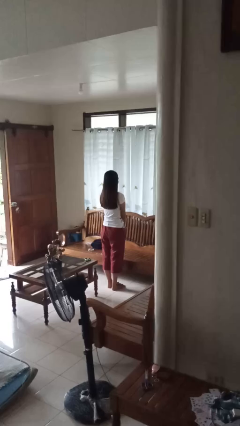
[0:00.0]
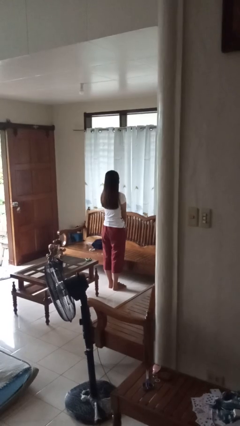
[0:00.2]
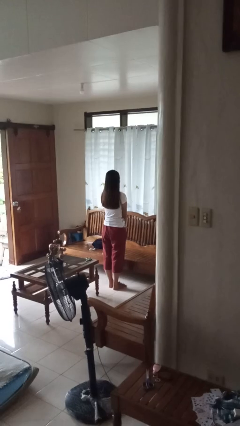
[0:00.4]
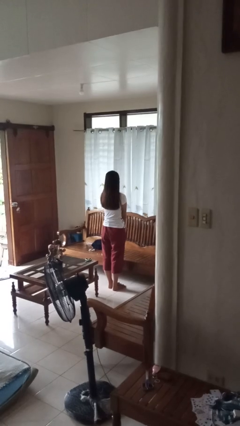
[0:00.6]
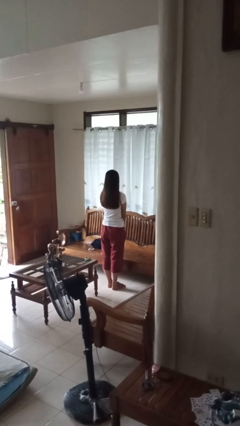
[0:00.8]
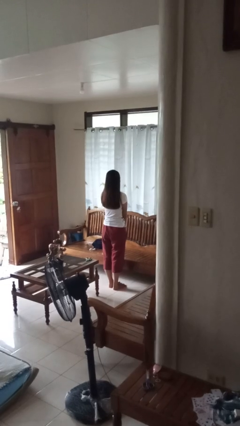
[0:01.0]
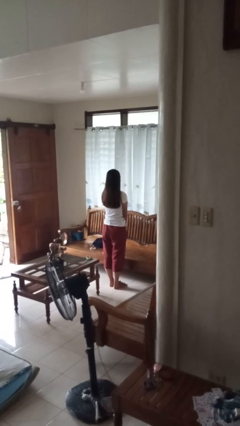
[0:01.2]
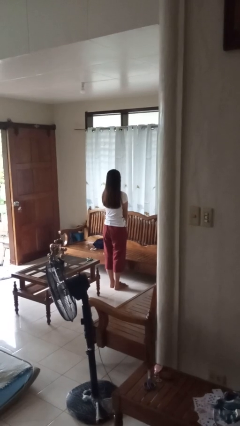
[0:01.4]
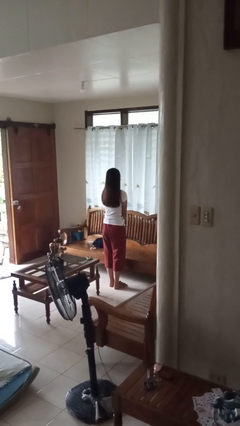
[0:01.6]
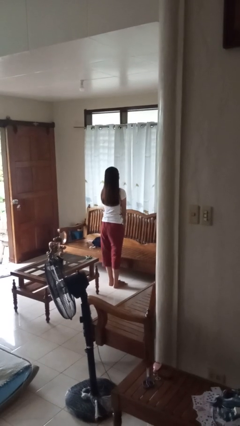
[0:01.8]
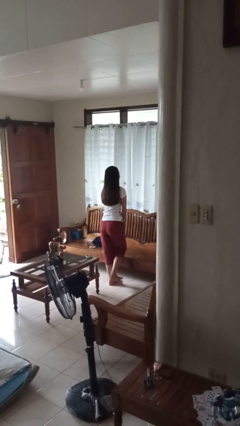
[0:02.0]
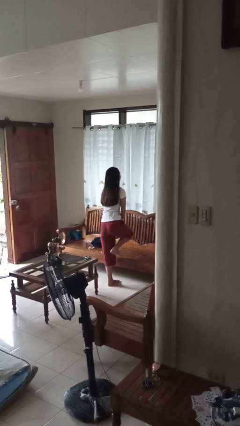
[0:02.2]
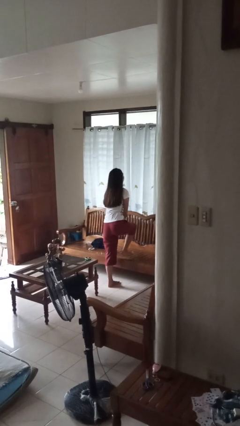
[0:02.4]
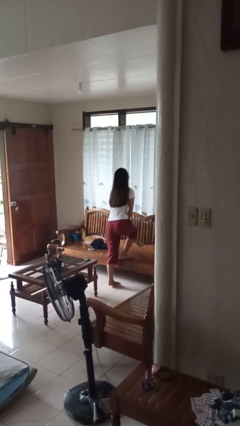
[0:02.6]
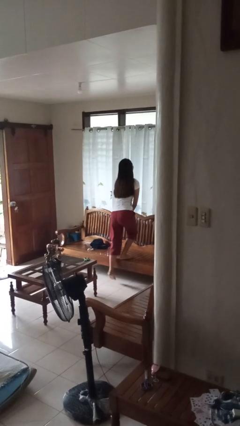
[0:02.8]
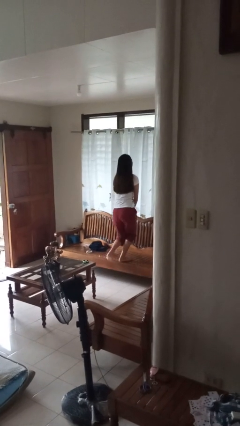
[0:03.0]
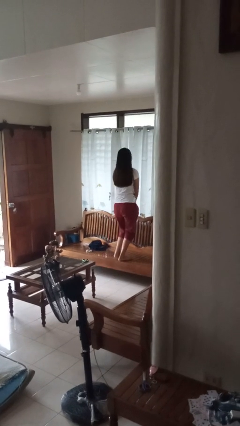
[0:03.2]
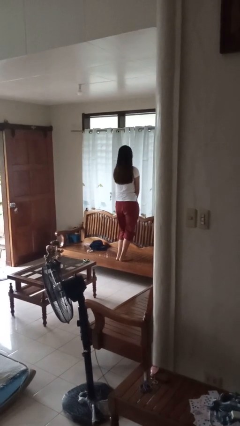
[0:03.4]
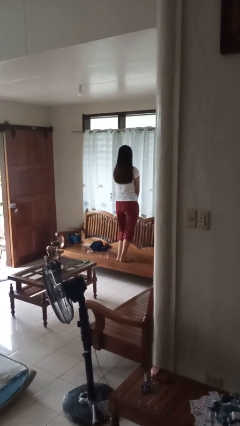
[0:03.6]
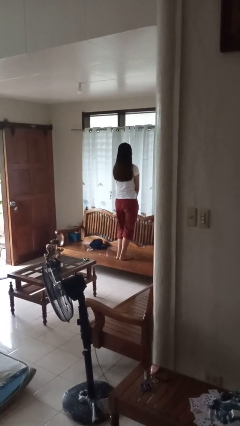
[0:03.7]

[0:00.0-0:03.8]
person climbs on chair

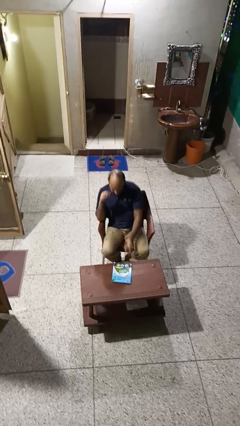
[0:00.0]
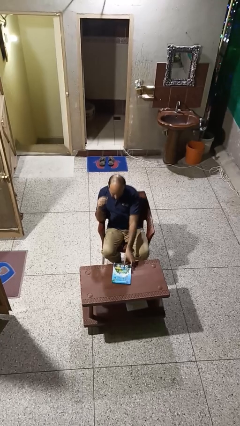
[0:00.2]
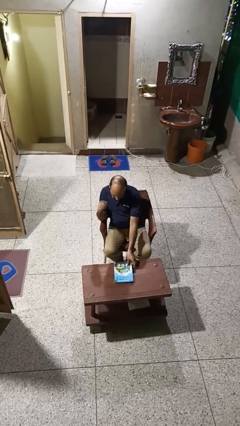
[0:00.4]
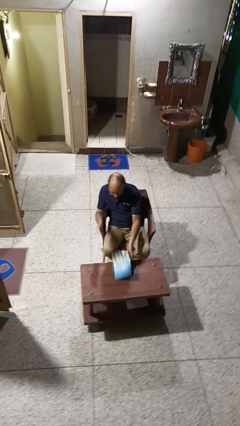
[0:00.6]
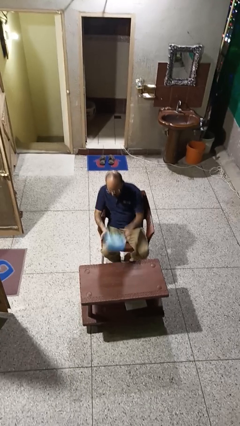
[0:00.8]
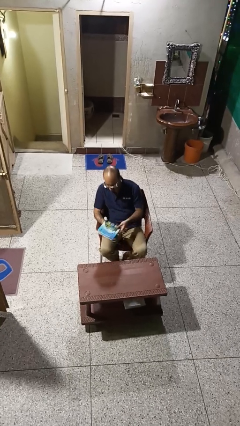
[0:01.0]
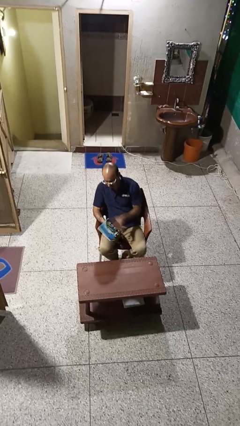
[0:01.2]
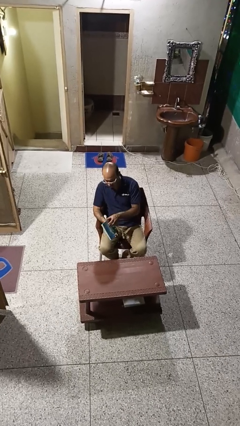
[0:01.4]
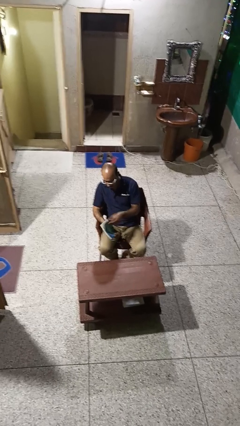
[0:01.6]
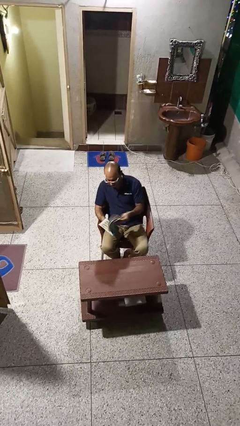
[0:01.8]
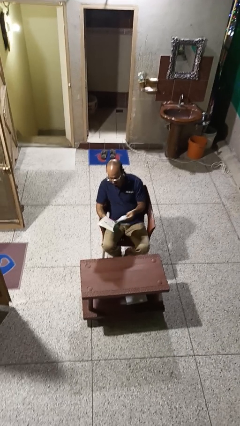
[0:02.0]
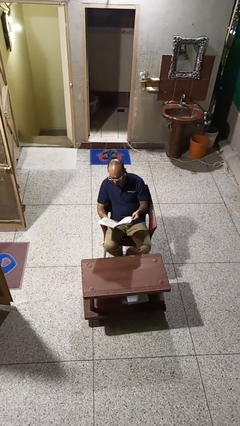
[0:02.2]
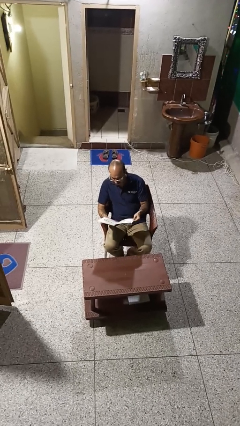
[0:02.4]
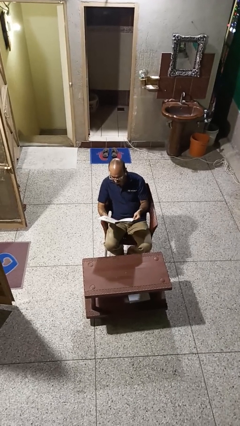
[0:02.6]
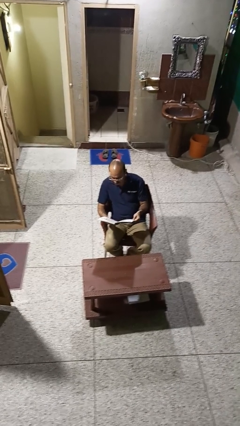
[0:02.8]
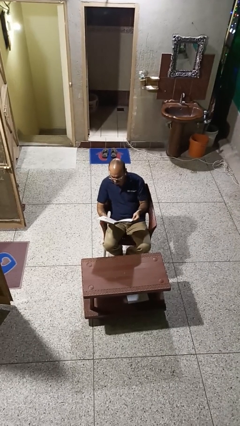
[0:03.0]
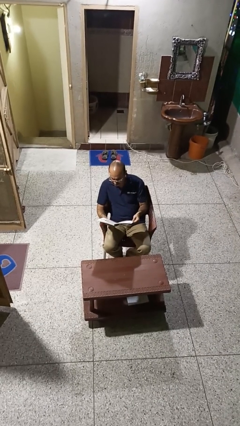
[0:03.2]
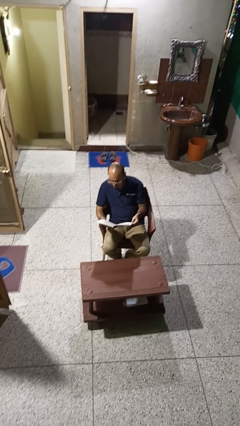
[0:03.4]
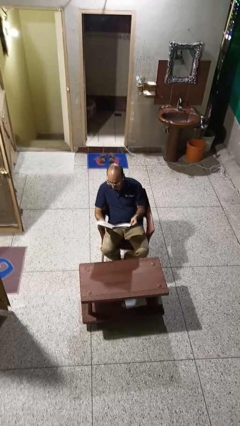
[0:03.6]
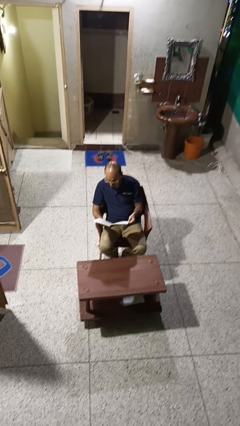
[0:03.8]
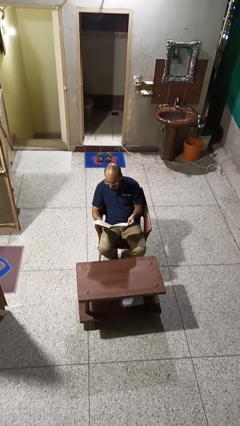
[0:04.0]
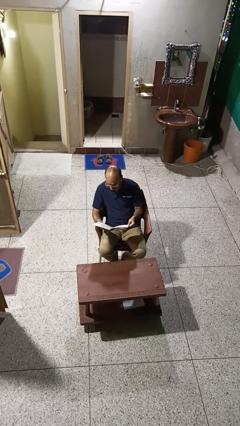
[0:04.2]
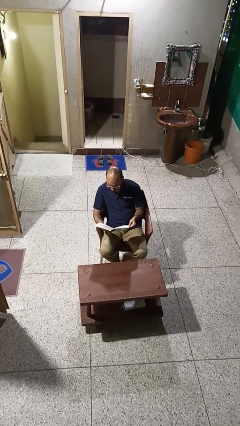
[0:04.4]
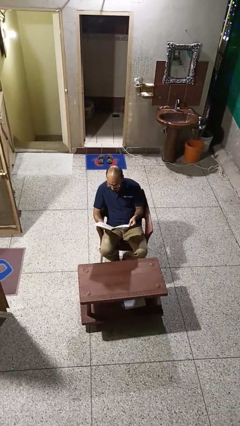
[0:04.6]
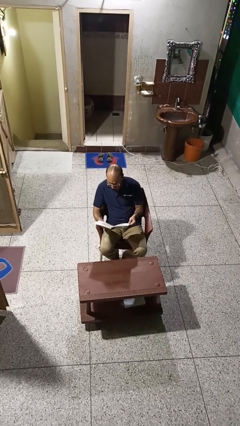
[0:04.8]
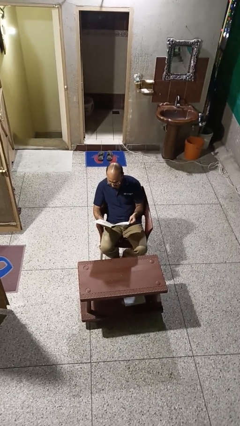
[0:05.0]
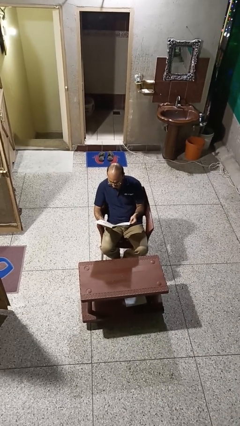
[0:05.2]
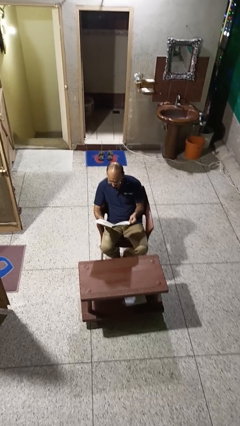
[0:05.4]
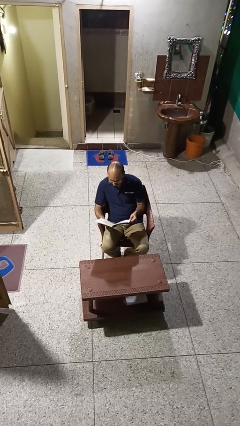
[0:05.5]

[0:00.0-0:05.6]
person reads book

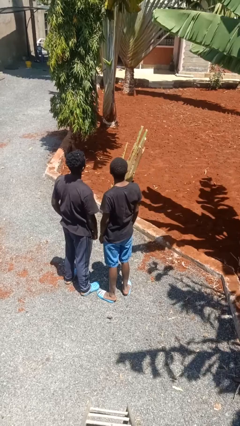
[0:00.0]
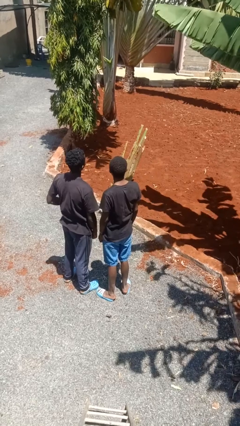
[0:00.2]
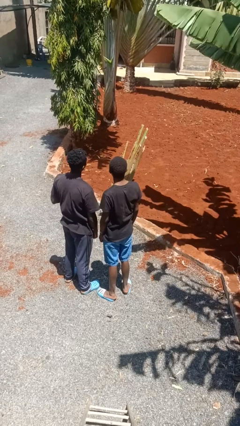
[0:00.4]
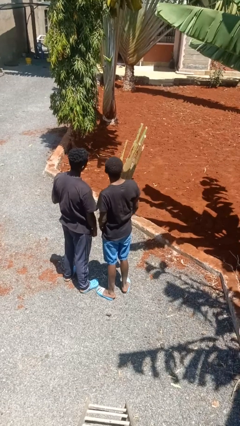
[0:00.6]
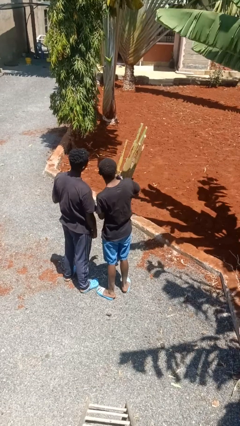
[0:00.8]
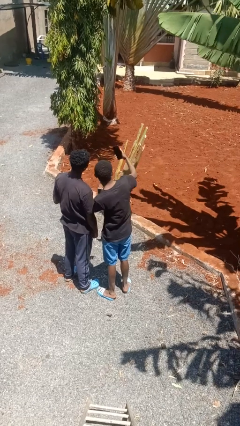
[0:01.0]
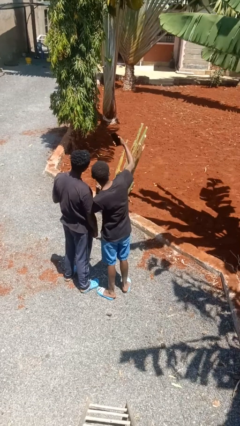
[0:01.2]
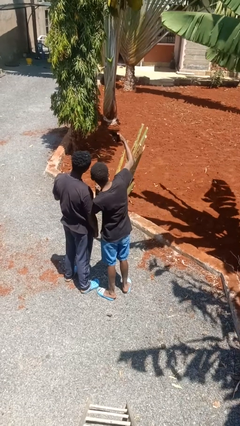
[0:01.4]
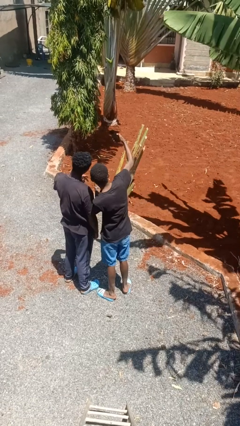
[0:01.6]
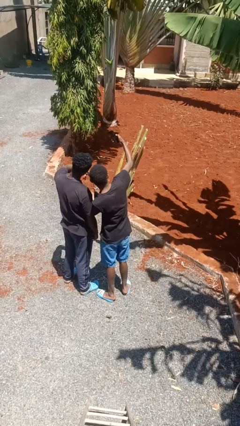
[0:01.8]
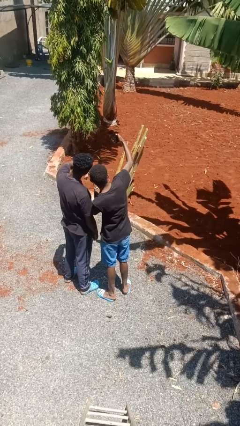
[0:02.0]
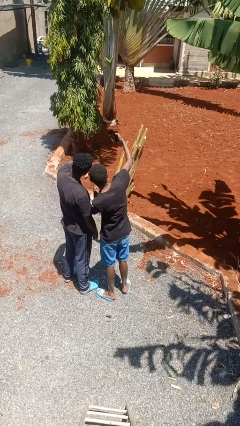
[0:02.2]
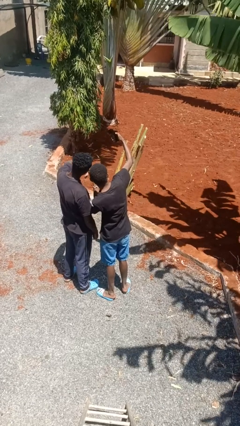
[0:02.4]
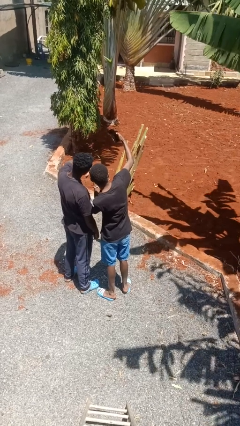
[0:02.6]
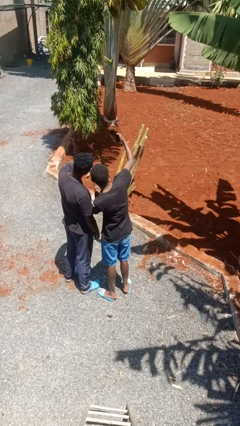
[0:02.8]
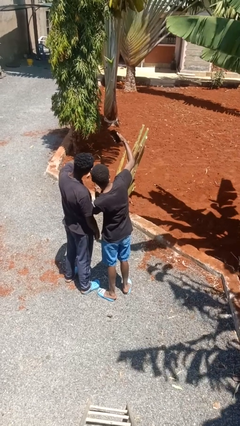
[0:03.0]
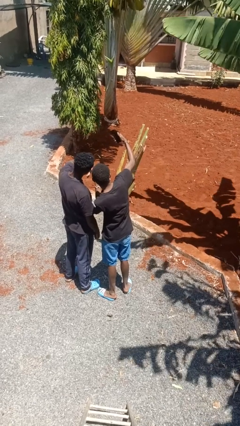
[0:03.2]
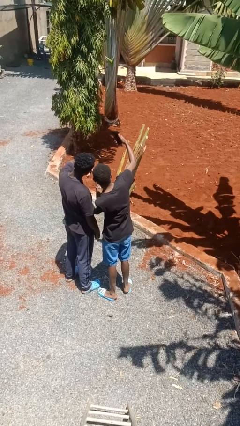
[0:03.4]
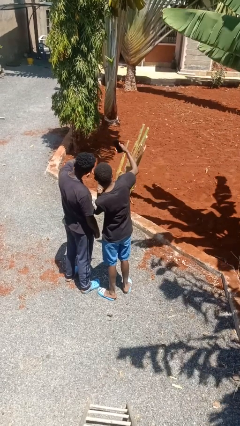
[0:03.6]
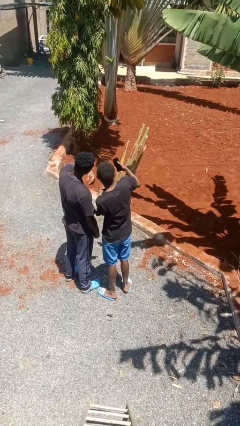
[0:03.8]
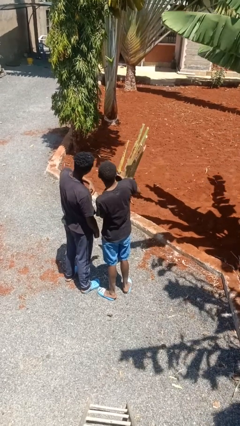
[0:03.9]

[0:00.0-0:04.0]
person takes selfie with person

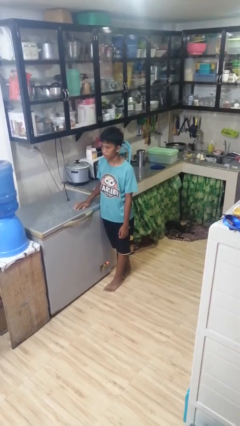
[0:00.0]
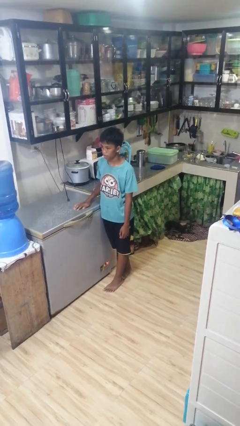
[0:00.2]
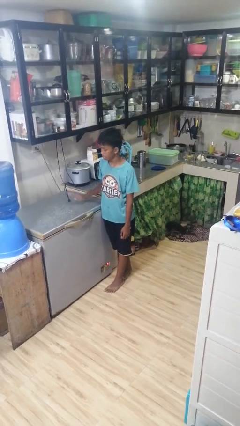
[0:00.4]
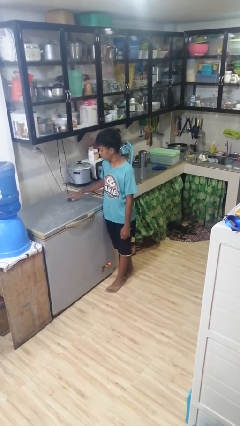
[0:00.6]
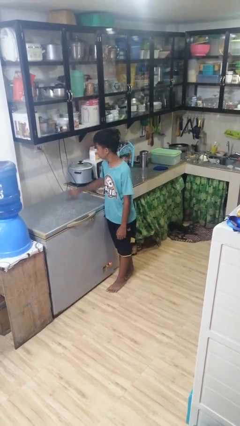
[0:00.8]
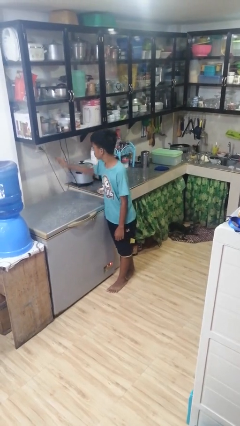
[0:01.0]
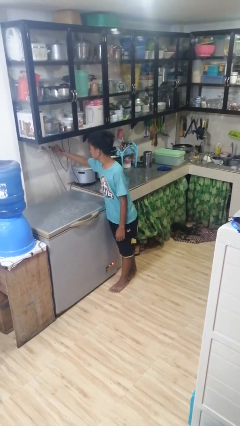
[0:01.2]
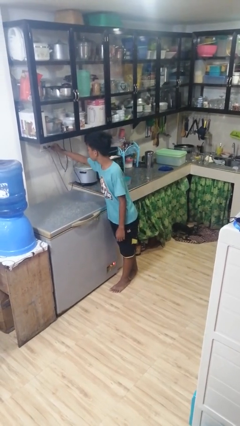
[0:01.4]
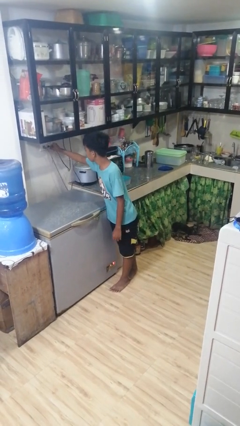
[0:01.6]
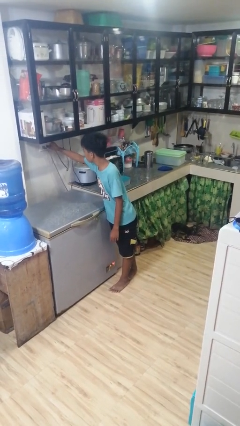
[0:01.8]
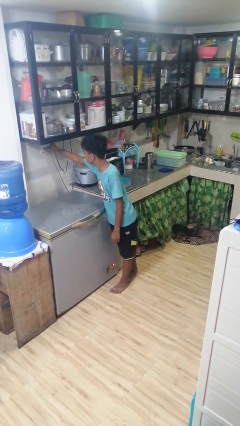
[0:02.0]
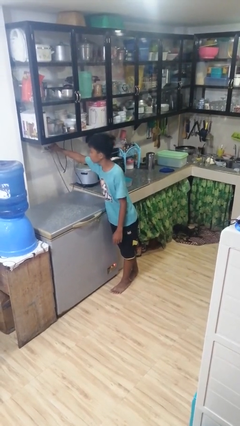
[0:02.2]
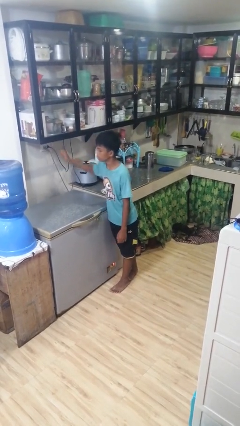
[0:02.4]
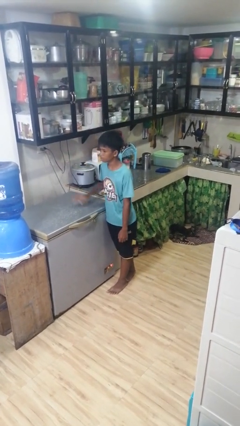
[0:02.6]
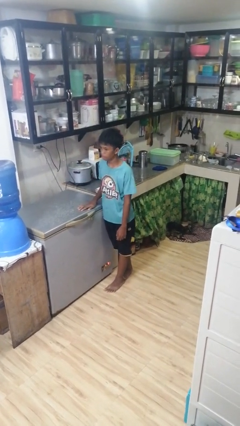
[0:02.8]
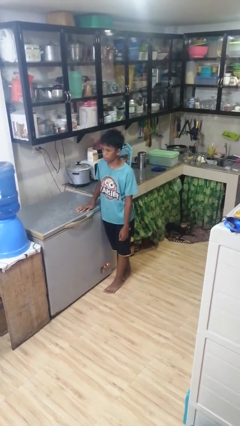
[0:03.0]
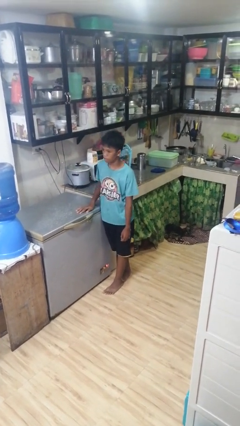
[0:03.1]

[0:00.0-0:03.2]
person plugs into electrical socket

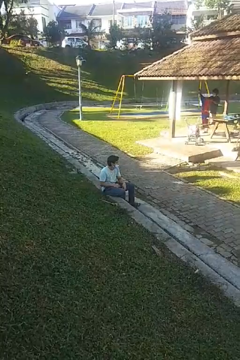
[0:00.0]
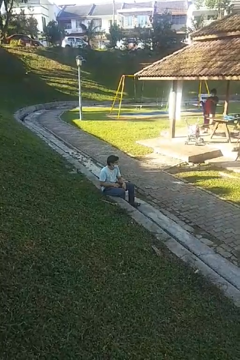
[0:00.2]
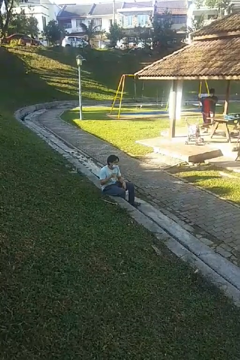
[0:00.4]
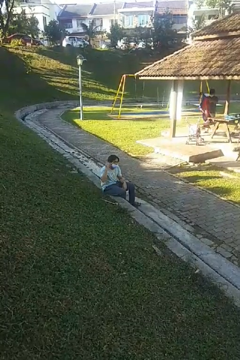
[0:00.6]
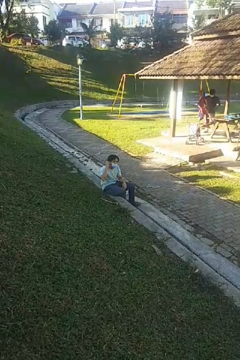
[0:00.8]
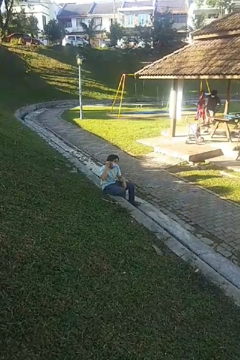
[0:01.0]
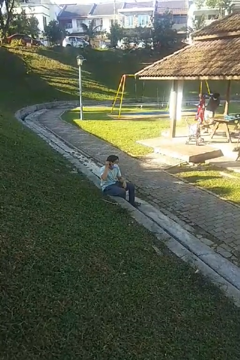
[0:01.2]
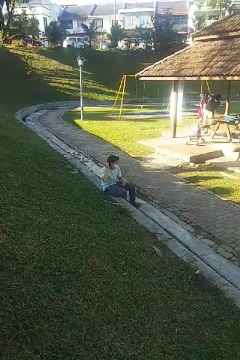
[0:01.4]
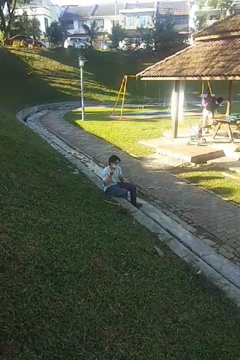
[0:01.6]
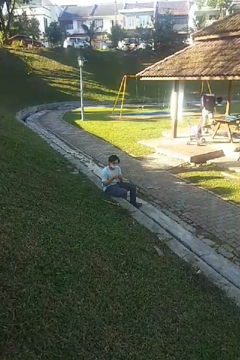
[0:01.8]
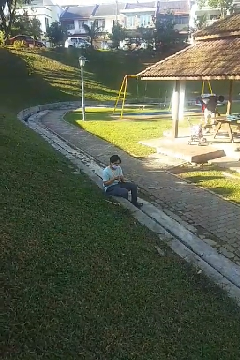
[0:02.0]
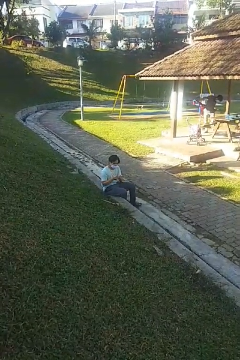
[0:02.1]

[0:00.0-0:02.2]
person takes off earrings
